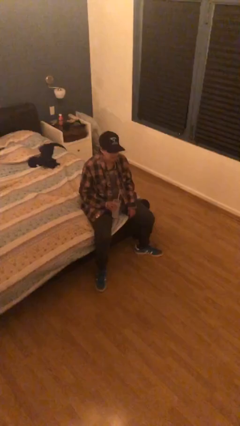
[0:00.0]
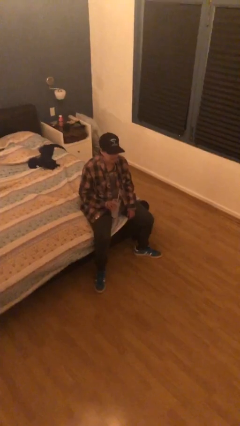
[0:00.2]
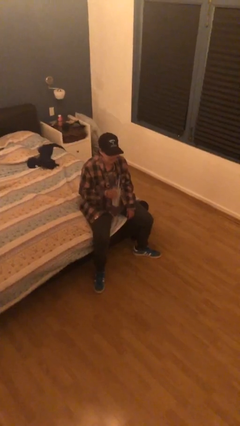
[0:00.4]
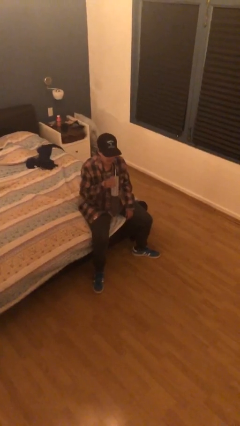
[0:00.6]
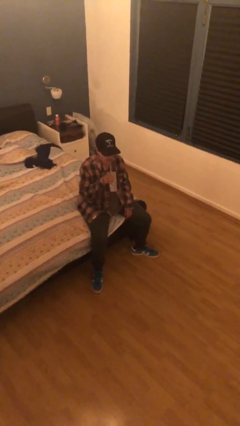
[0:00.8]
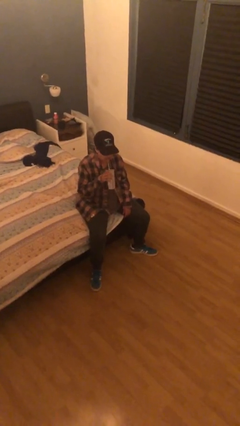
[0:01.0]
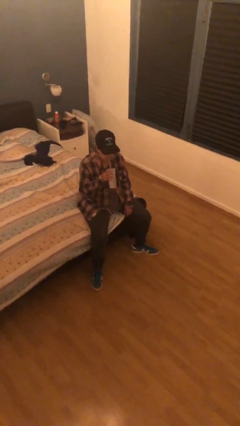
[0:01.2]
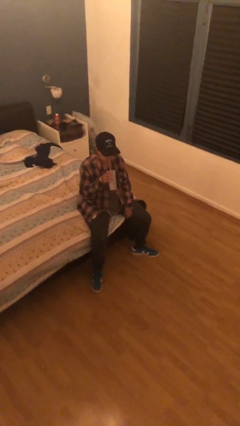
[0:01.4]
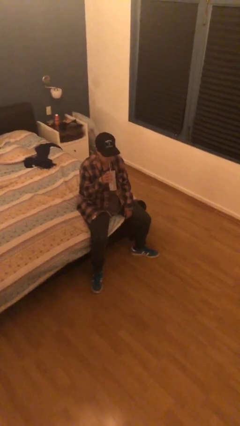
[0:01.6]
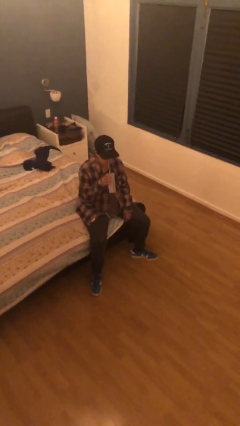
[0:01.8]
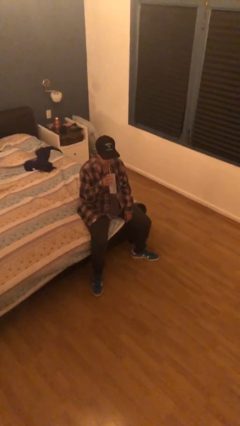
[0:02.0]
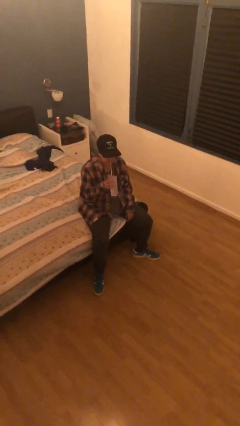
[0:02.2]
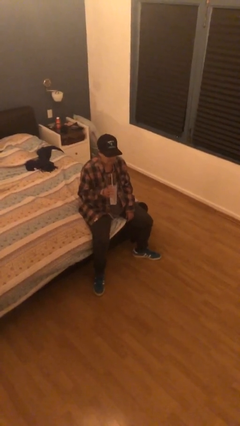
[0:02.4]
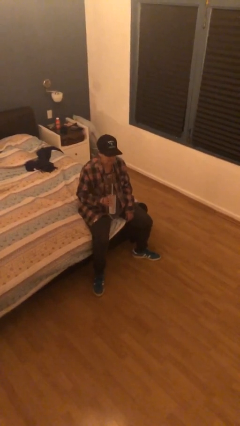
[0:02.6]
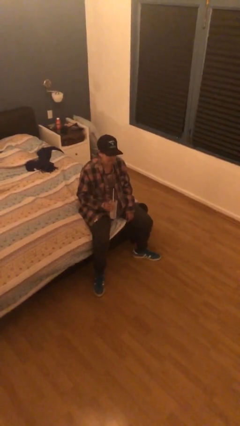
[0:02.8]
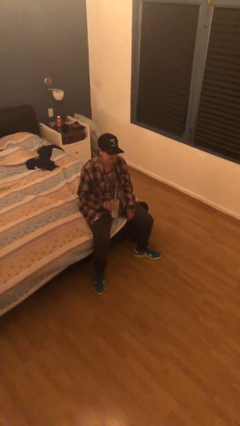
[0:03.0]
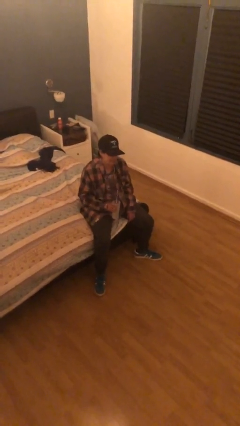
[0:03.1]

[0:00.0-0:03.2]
person drinks from straw

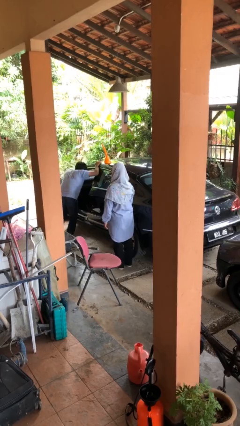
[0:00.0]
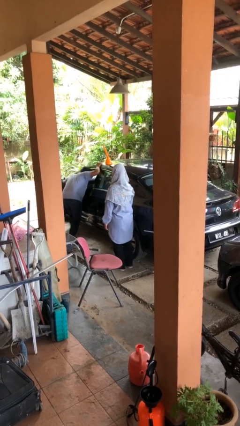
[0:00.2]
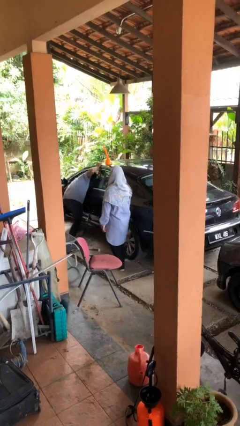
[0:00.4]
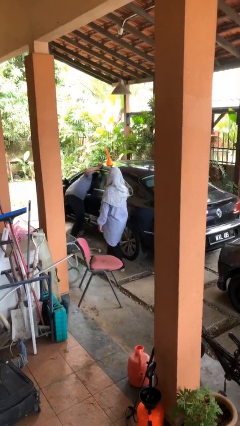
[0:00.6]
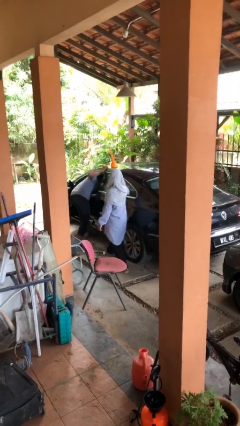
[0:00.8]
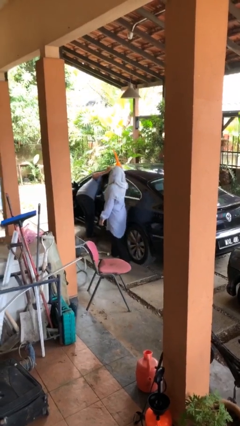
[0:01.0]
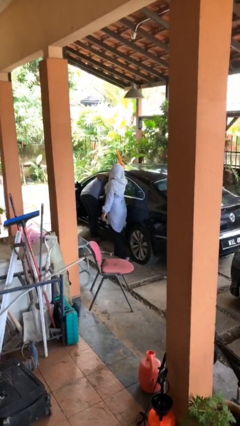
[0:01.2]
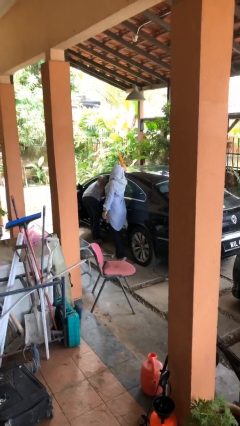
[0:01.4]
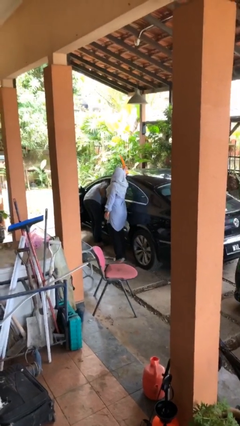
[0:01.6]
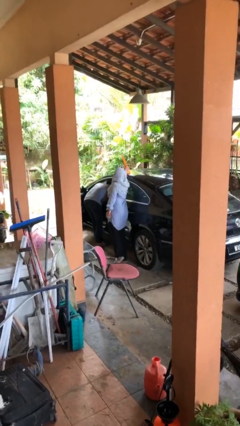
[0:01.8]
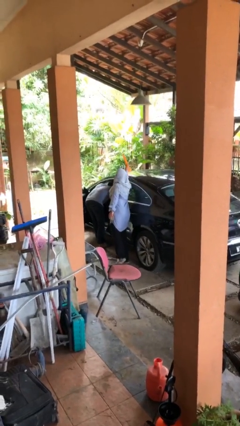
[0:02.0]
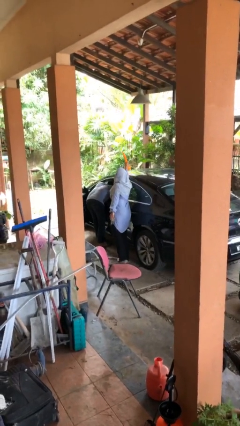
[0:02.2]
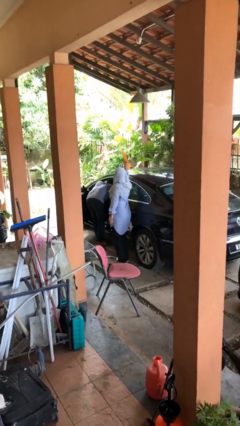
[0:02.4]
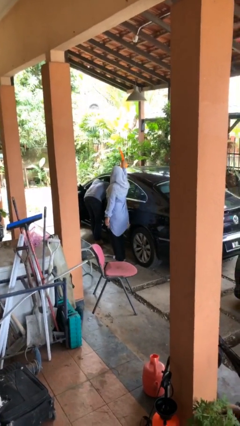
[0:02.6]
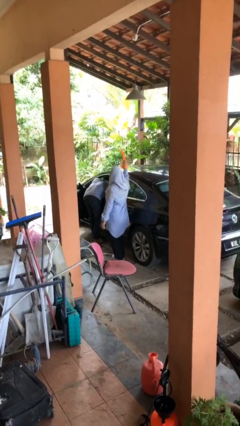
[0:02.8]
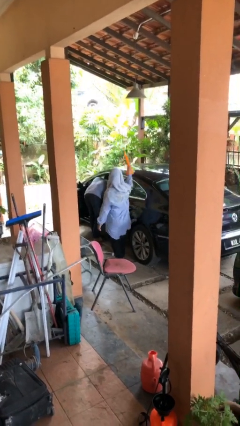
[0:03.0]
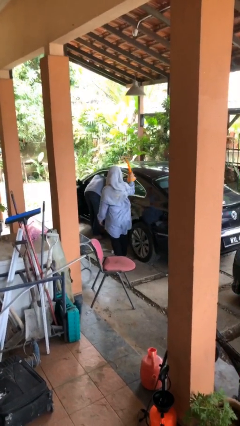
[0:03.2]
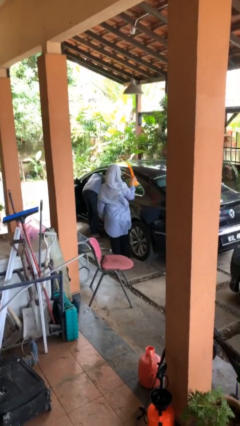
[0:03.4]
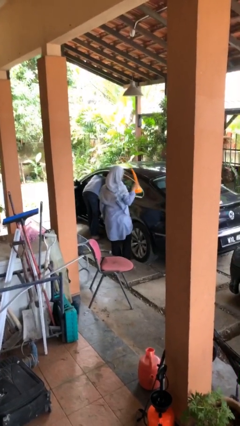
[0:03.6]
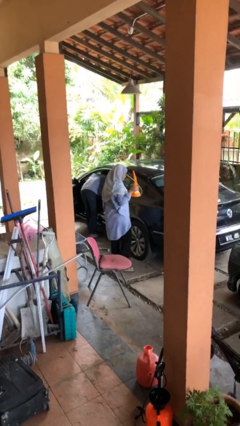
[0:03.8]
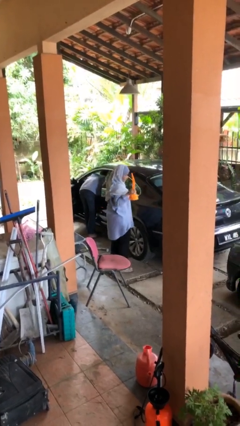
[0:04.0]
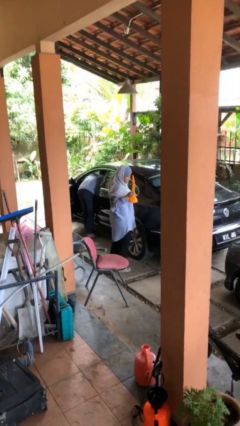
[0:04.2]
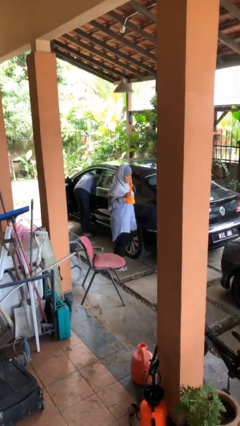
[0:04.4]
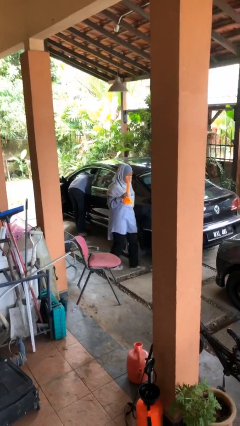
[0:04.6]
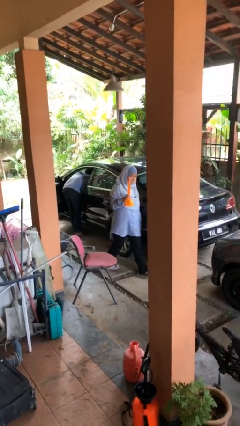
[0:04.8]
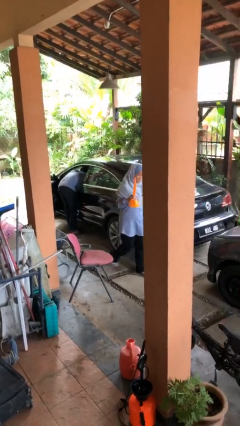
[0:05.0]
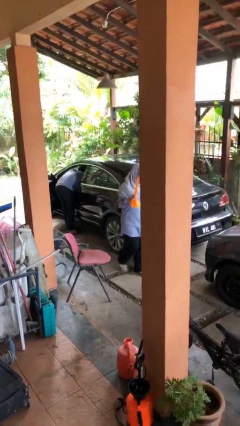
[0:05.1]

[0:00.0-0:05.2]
person steals object from person

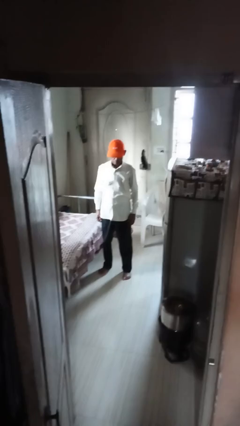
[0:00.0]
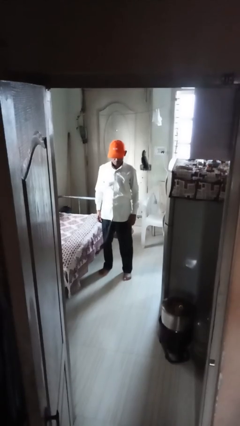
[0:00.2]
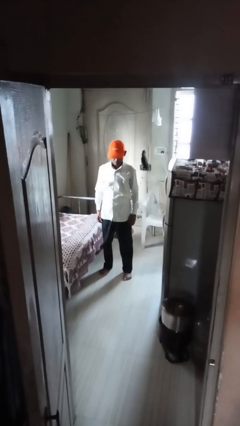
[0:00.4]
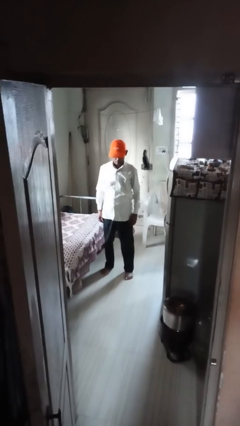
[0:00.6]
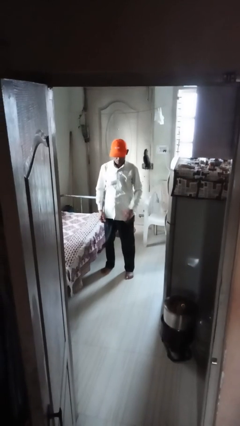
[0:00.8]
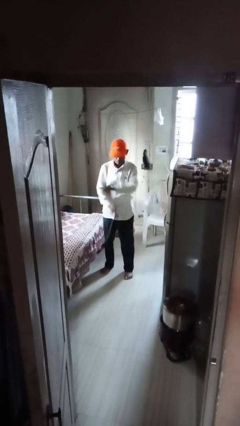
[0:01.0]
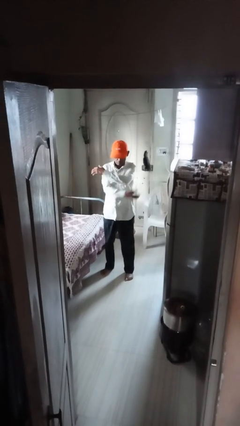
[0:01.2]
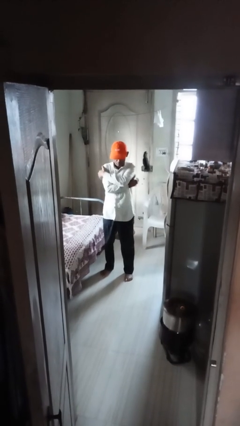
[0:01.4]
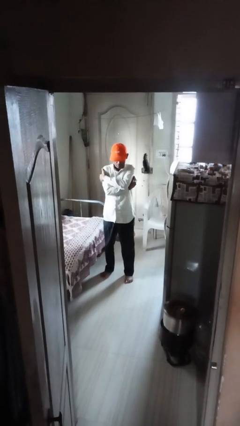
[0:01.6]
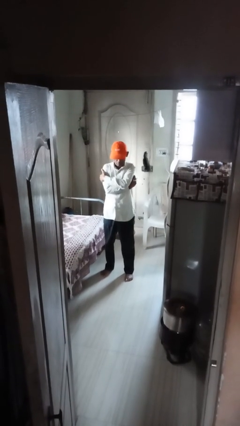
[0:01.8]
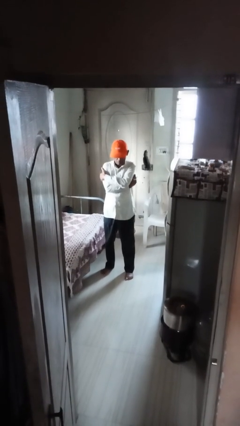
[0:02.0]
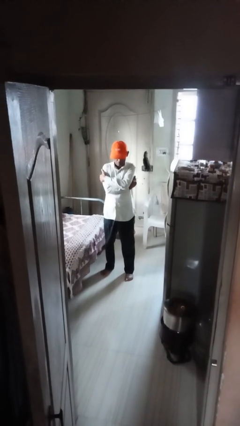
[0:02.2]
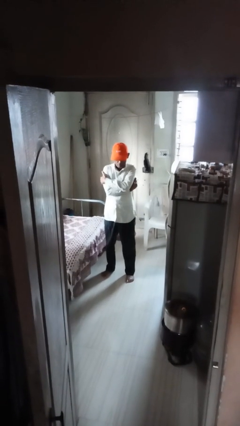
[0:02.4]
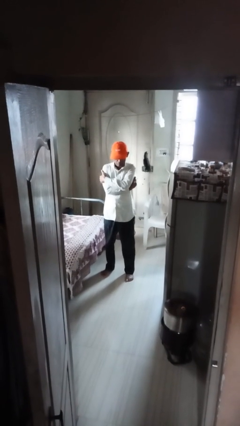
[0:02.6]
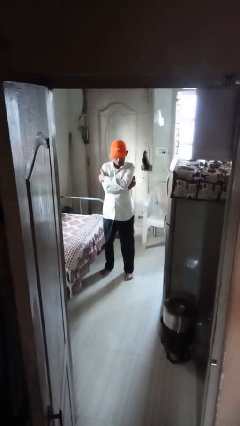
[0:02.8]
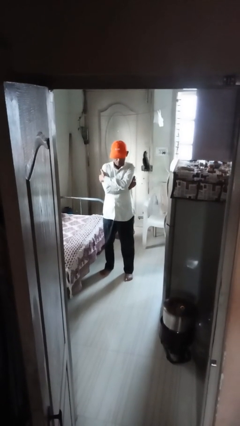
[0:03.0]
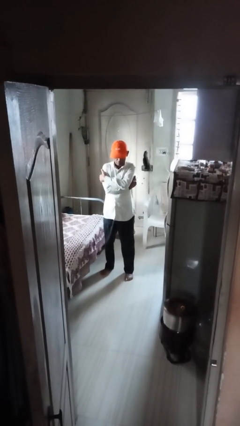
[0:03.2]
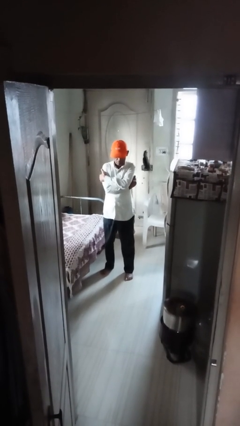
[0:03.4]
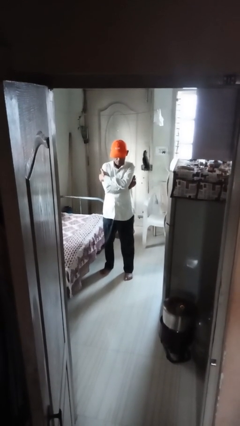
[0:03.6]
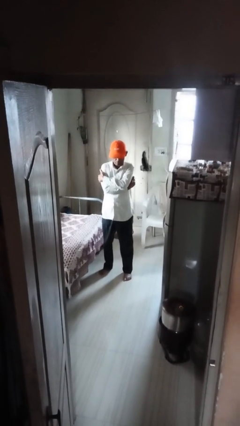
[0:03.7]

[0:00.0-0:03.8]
person crosses arms

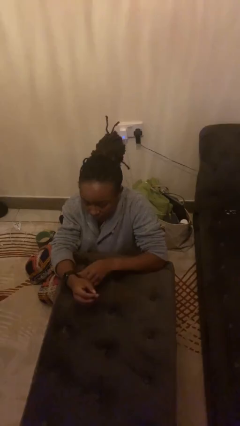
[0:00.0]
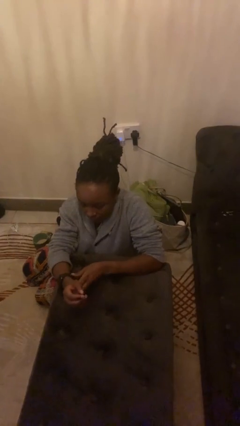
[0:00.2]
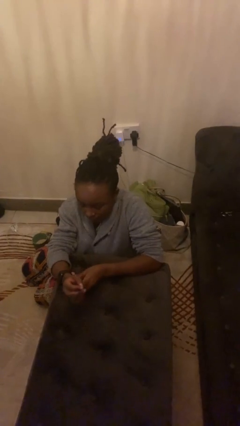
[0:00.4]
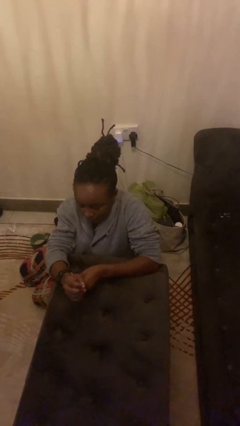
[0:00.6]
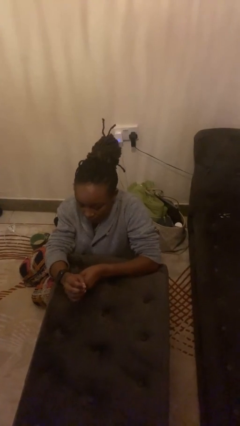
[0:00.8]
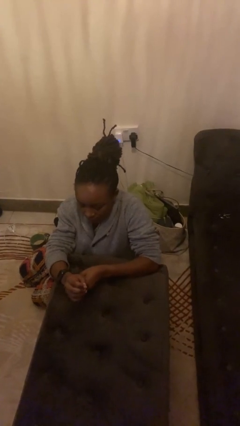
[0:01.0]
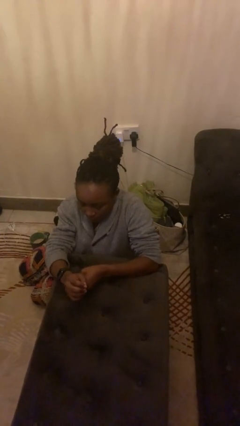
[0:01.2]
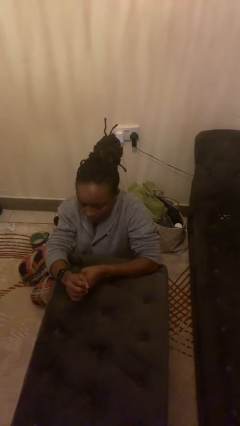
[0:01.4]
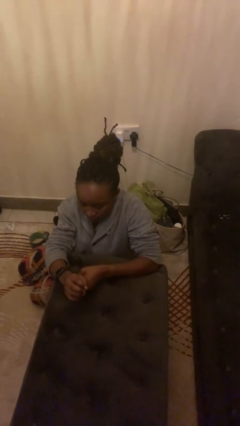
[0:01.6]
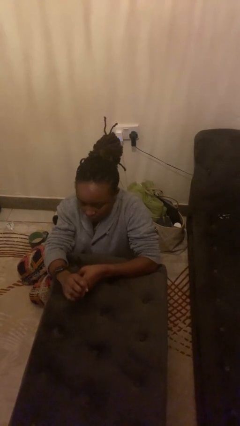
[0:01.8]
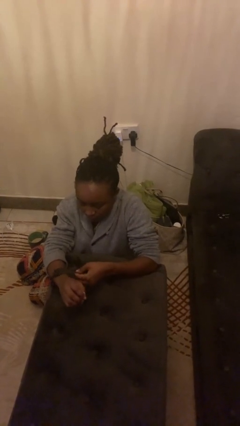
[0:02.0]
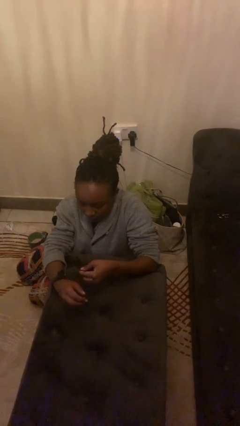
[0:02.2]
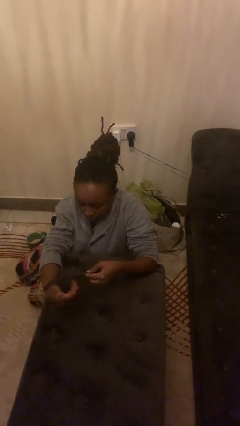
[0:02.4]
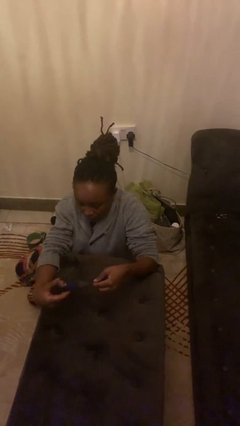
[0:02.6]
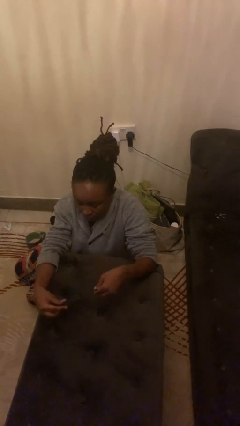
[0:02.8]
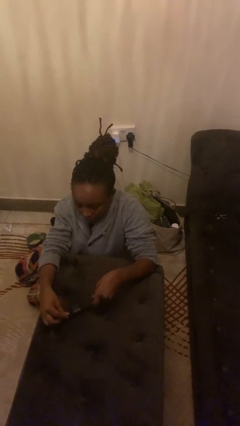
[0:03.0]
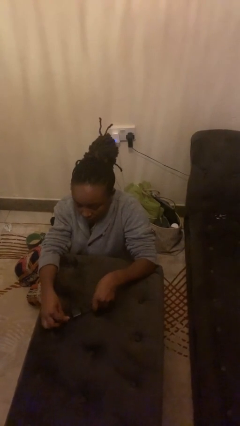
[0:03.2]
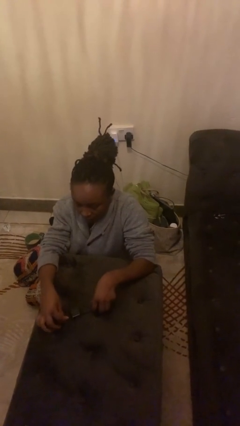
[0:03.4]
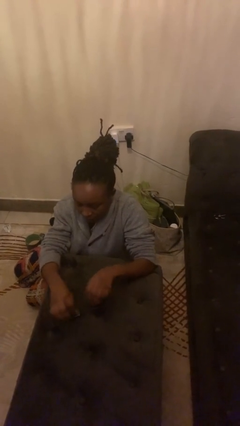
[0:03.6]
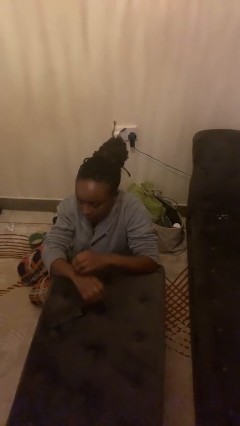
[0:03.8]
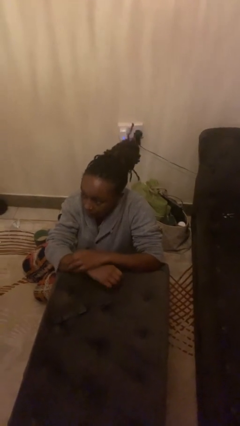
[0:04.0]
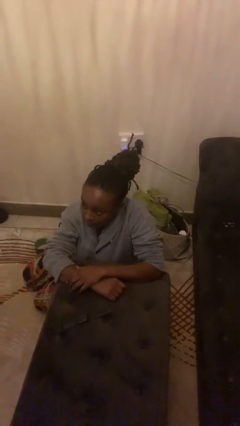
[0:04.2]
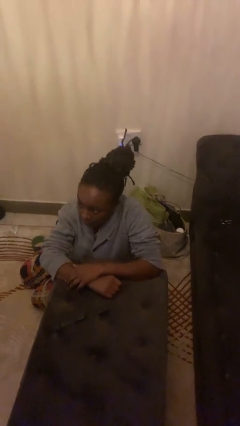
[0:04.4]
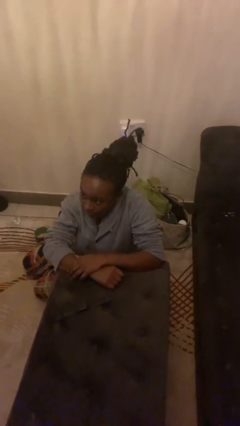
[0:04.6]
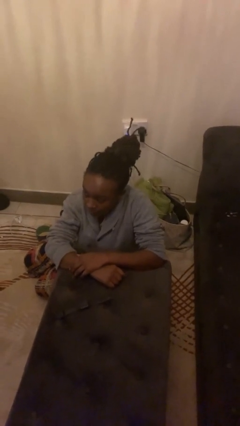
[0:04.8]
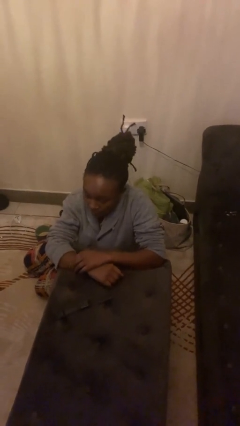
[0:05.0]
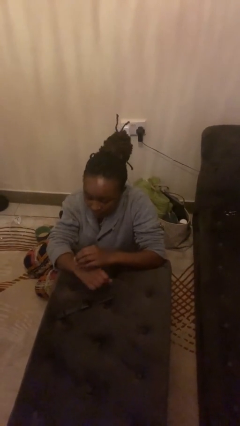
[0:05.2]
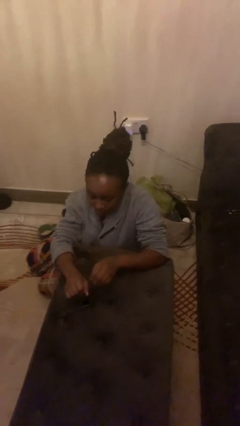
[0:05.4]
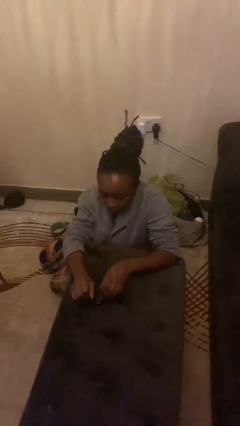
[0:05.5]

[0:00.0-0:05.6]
person takes off wristwatch
